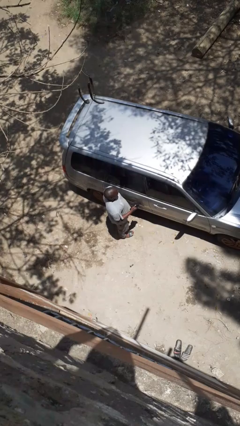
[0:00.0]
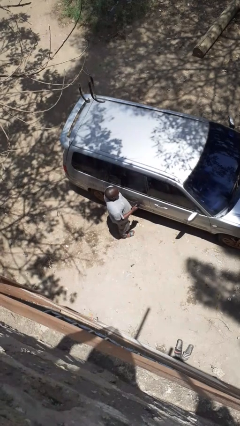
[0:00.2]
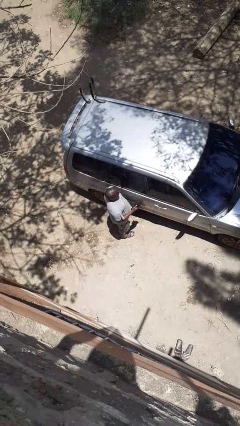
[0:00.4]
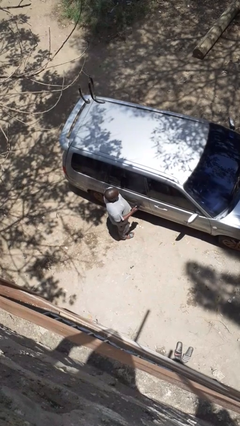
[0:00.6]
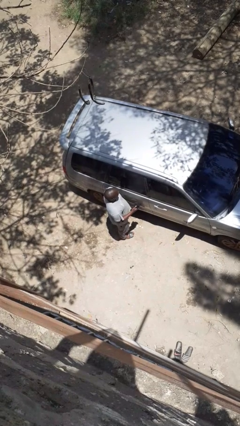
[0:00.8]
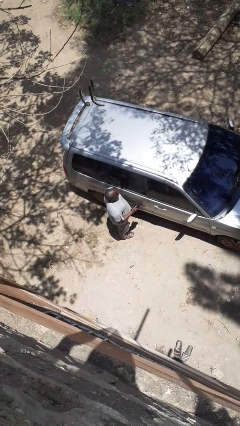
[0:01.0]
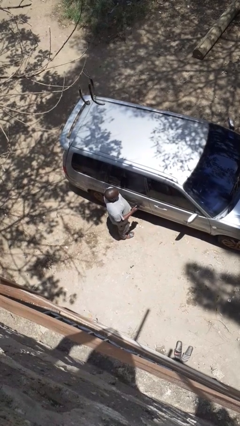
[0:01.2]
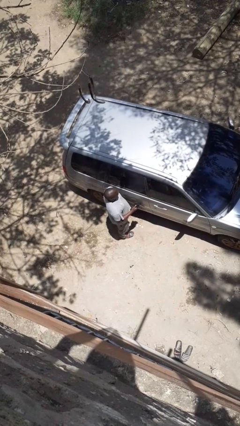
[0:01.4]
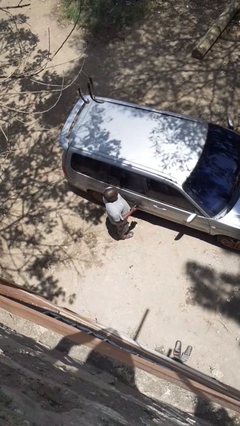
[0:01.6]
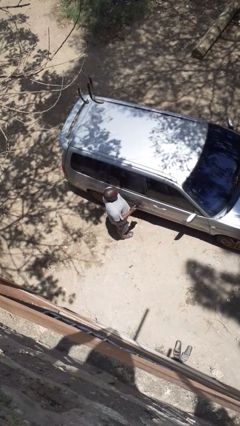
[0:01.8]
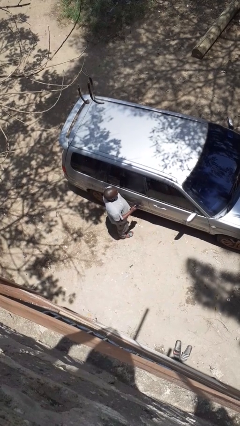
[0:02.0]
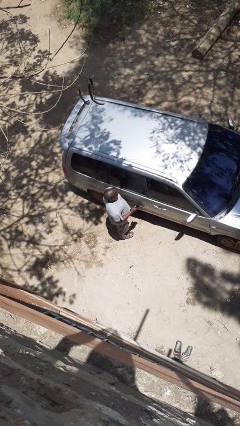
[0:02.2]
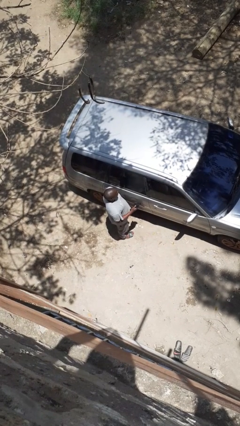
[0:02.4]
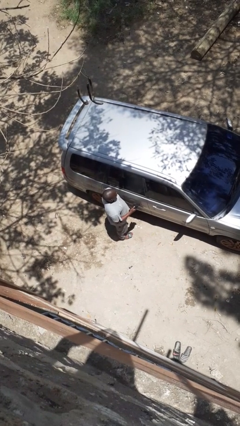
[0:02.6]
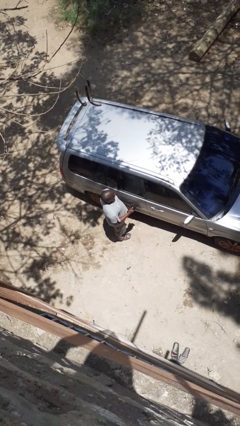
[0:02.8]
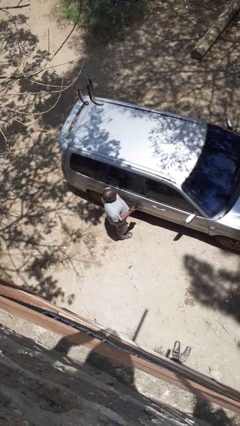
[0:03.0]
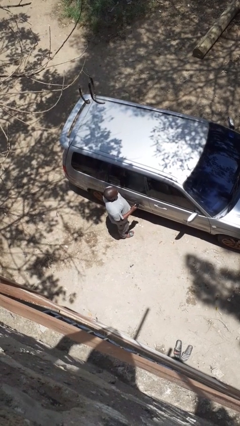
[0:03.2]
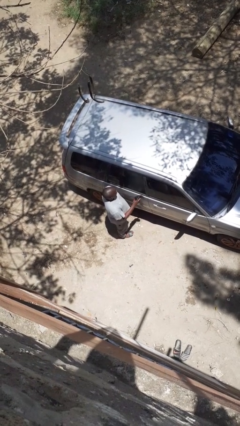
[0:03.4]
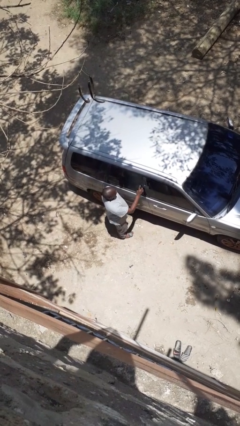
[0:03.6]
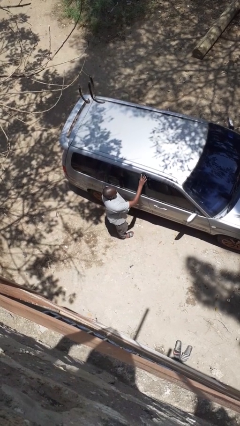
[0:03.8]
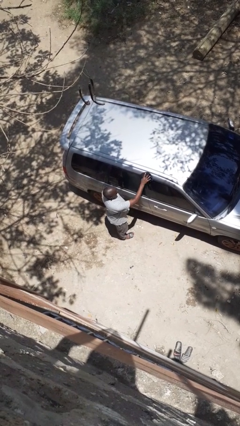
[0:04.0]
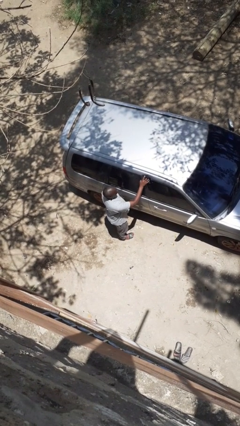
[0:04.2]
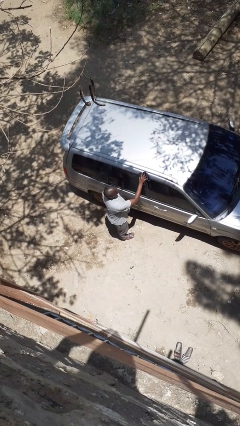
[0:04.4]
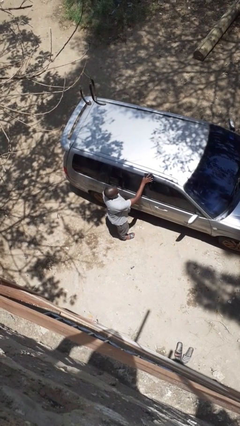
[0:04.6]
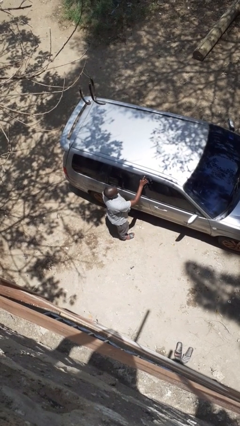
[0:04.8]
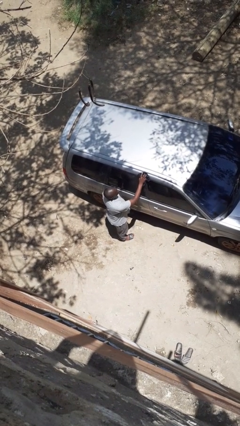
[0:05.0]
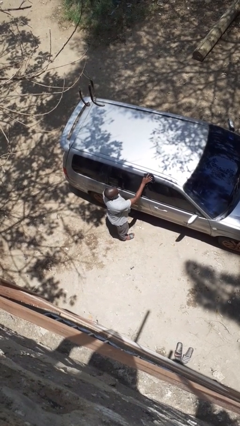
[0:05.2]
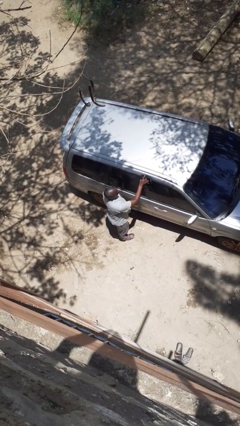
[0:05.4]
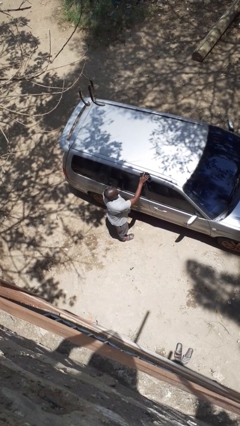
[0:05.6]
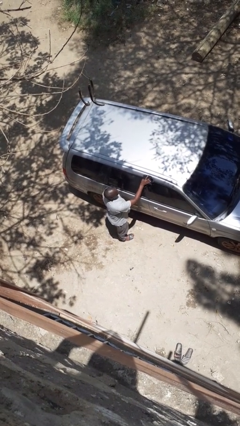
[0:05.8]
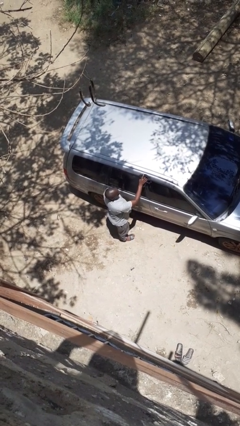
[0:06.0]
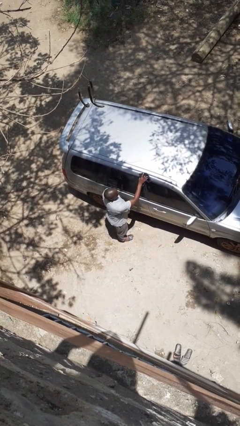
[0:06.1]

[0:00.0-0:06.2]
person polishes car with rag

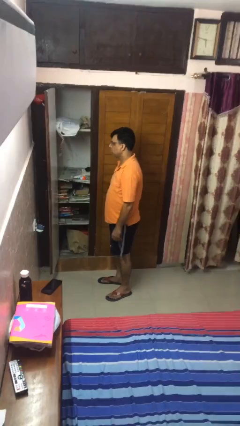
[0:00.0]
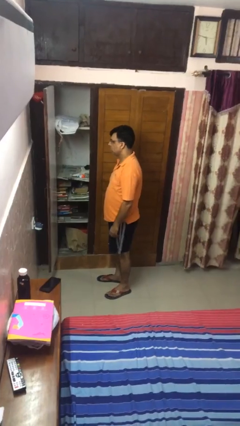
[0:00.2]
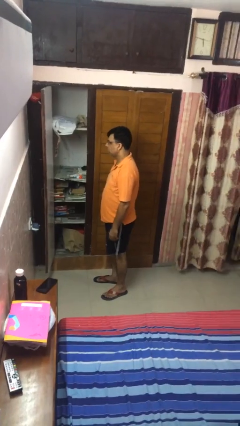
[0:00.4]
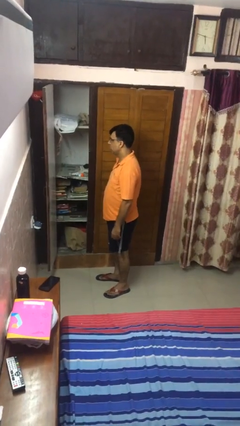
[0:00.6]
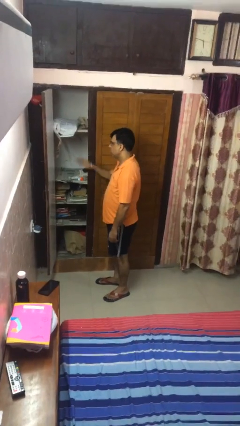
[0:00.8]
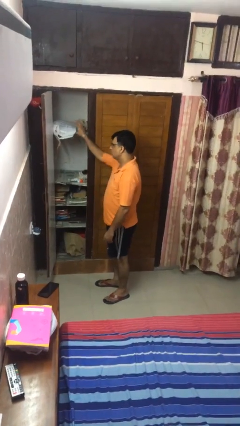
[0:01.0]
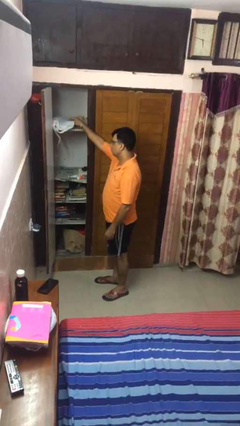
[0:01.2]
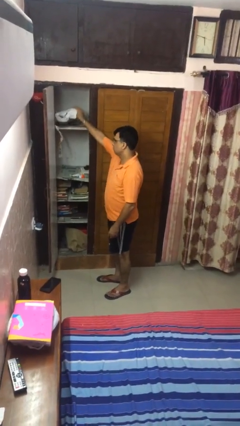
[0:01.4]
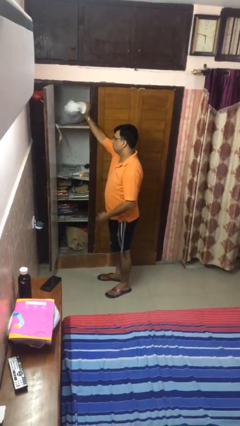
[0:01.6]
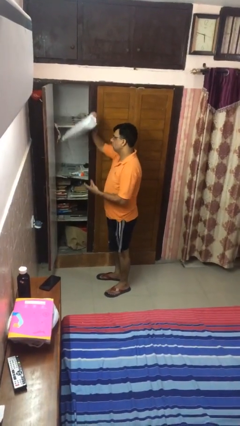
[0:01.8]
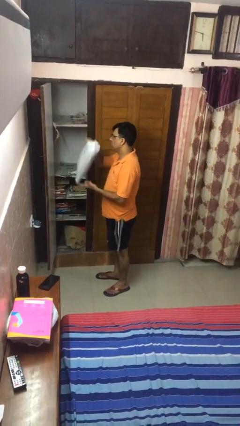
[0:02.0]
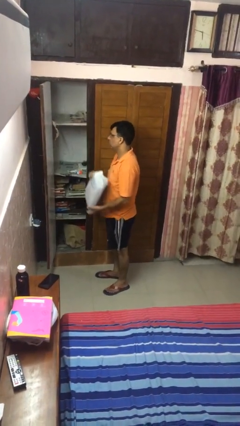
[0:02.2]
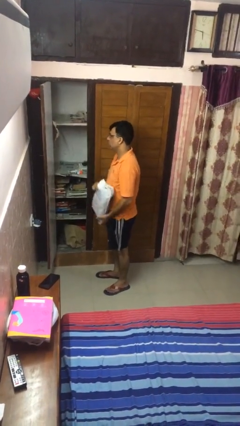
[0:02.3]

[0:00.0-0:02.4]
person picks up object from shelf

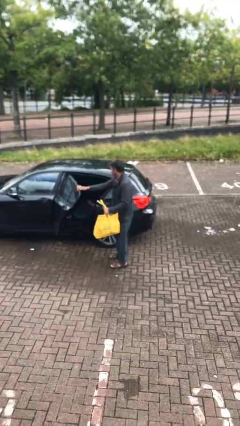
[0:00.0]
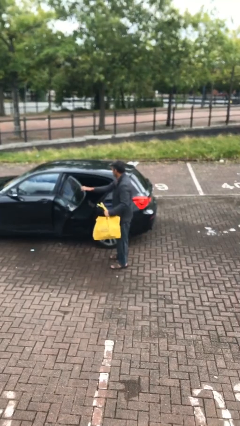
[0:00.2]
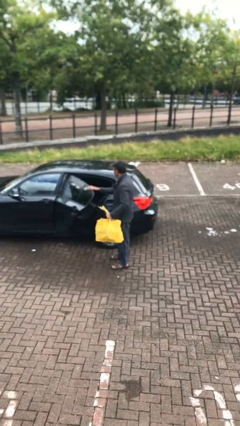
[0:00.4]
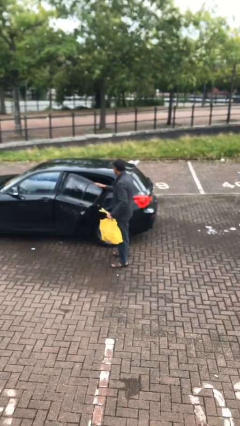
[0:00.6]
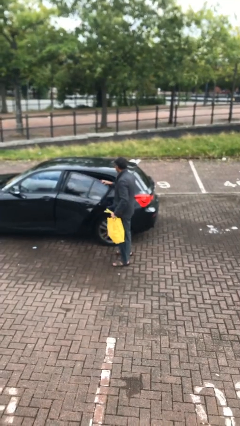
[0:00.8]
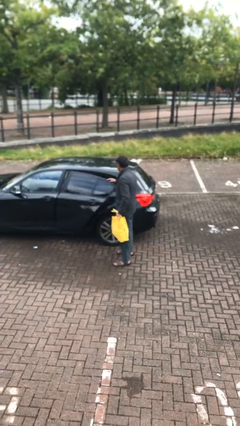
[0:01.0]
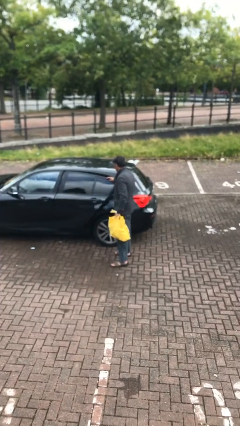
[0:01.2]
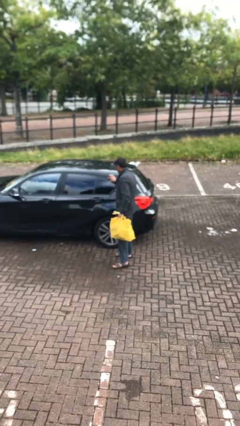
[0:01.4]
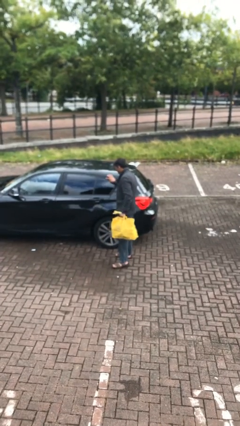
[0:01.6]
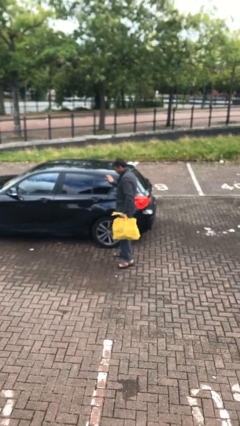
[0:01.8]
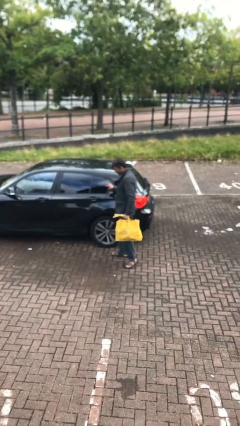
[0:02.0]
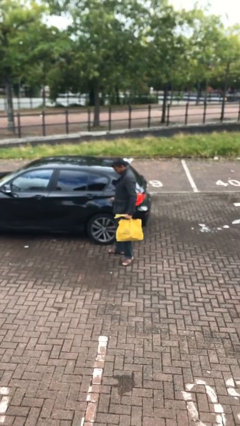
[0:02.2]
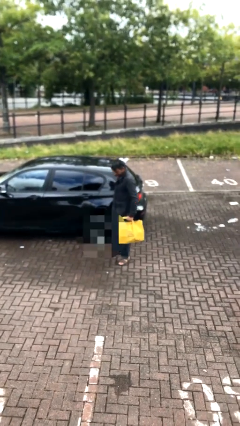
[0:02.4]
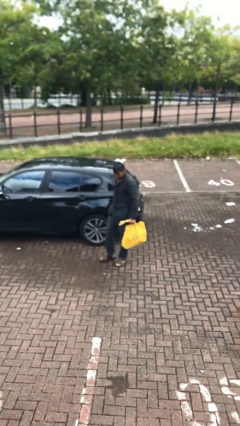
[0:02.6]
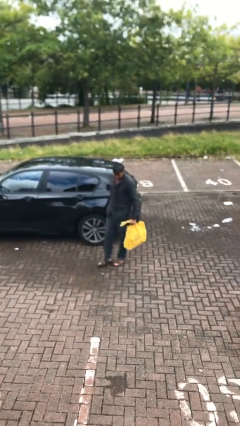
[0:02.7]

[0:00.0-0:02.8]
person closes car door

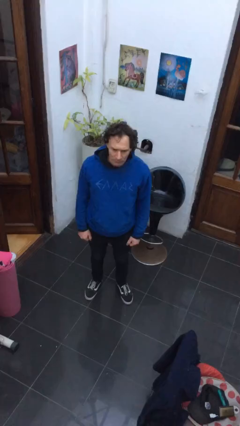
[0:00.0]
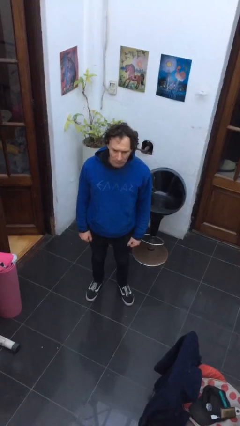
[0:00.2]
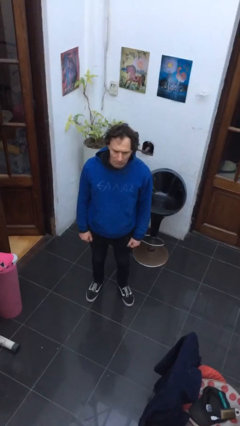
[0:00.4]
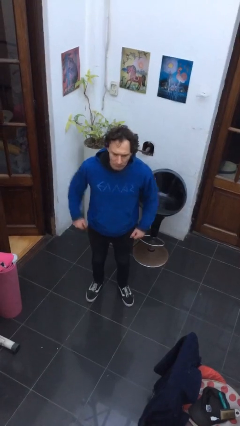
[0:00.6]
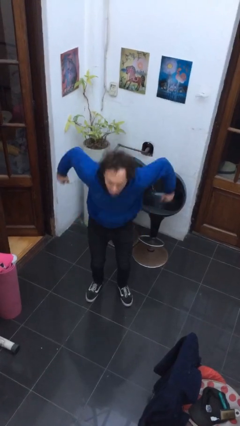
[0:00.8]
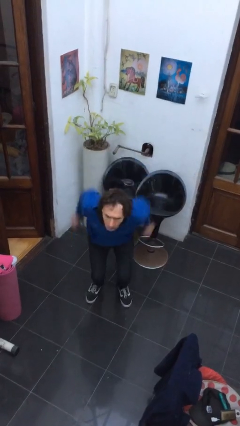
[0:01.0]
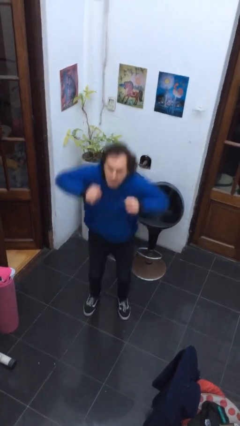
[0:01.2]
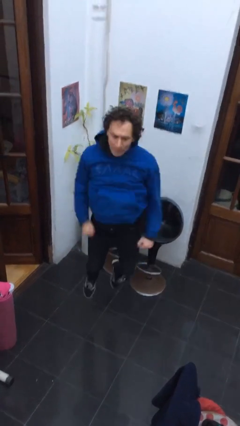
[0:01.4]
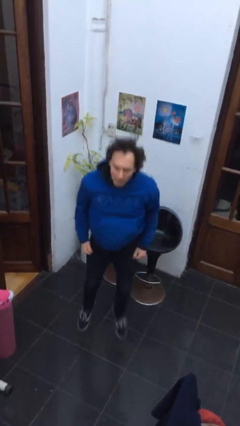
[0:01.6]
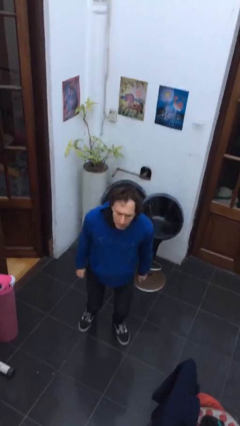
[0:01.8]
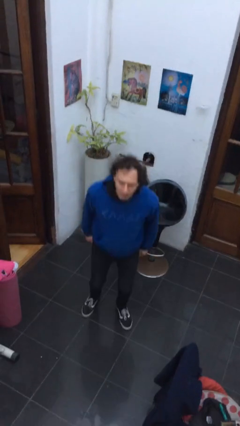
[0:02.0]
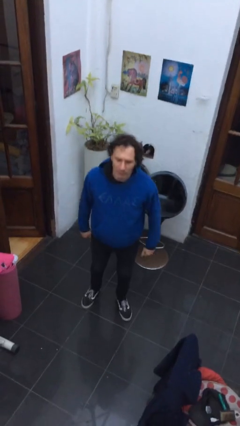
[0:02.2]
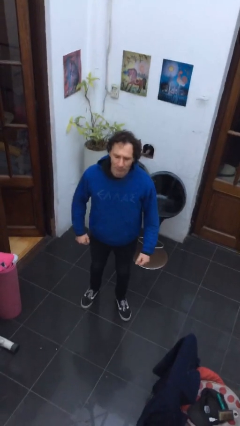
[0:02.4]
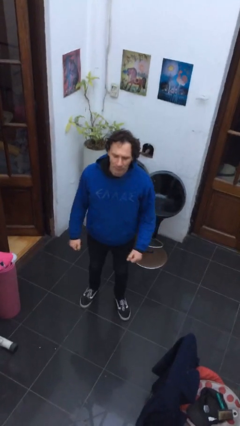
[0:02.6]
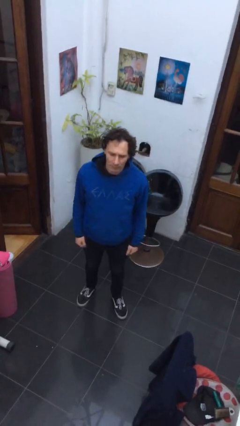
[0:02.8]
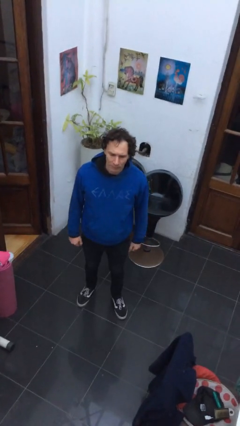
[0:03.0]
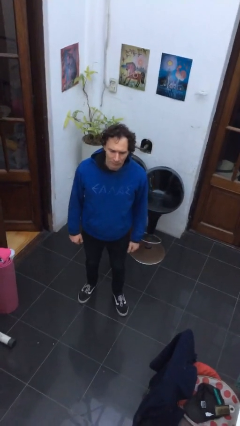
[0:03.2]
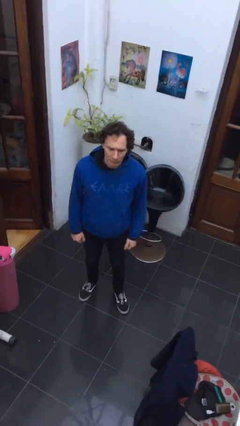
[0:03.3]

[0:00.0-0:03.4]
person jumps

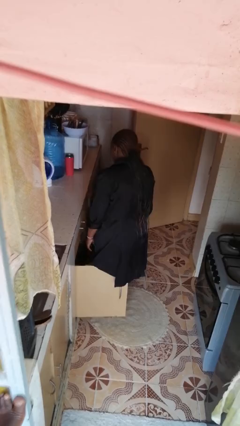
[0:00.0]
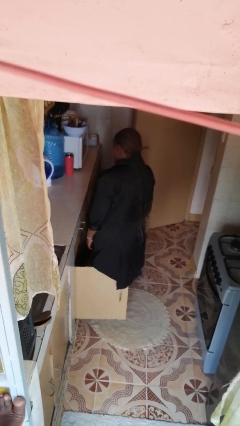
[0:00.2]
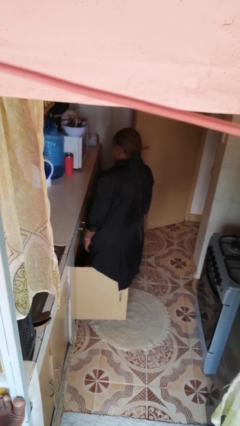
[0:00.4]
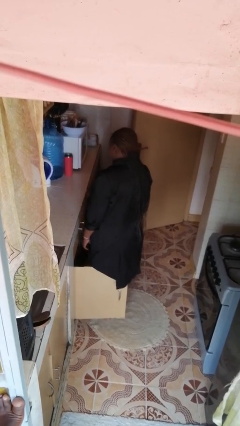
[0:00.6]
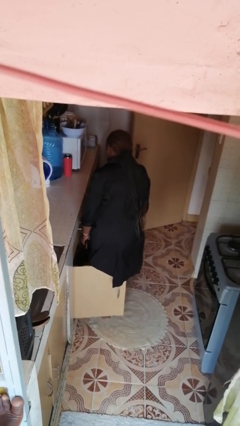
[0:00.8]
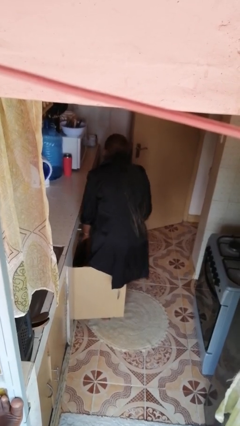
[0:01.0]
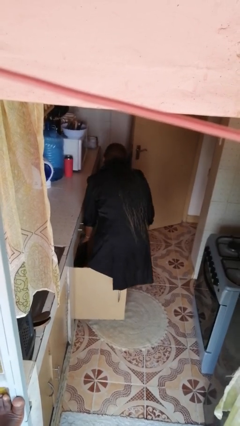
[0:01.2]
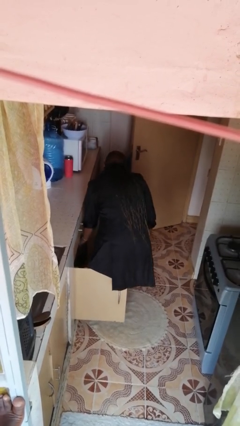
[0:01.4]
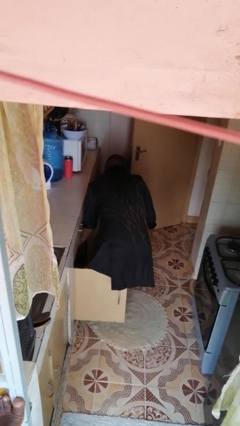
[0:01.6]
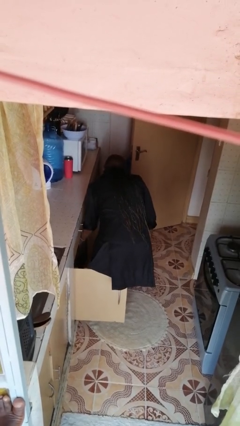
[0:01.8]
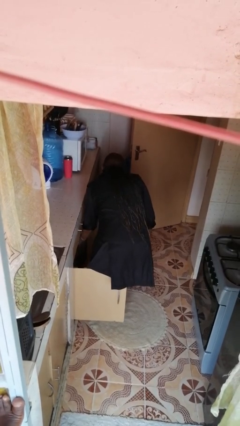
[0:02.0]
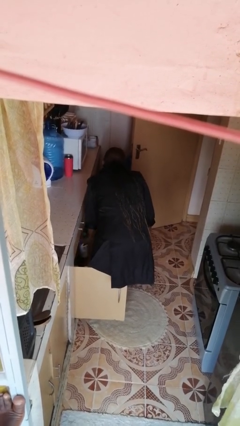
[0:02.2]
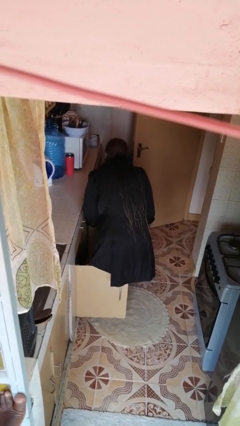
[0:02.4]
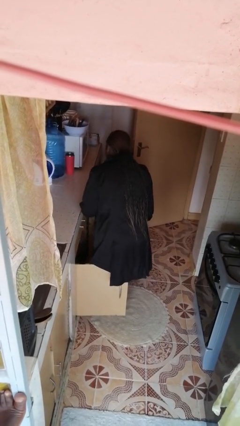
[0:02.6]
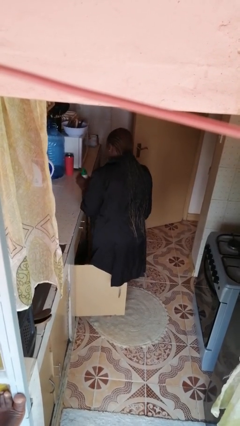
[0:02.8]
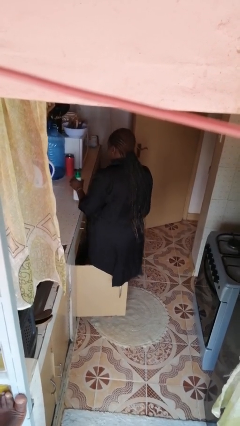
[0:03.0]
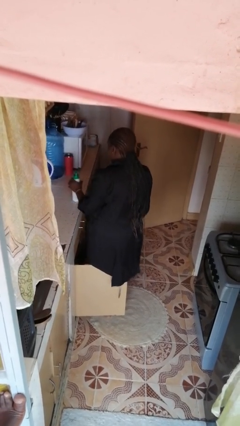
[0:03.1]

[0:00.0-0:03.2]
person takes object from cabinet
